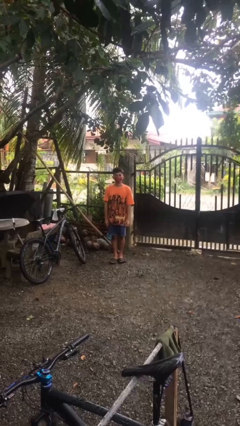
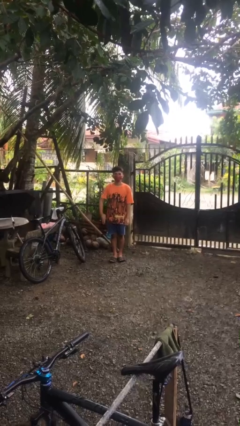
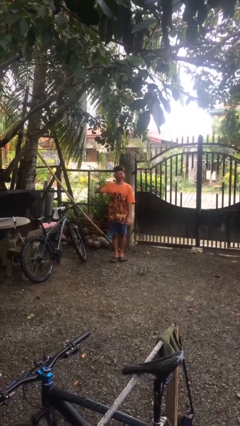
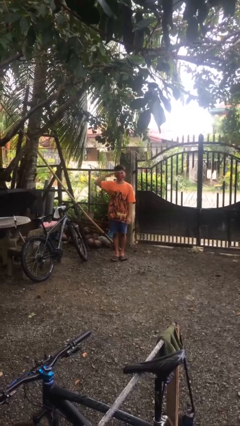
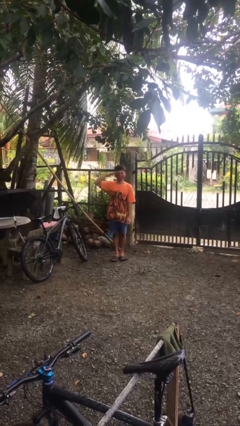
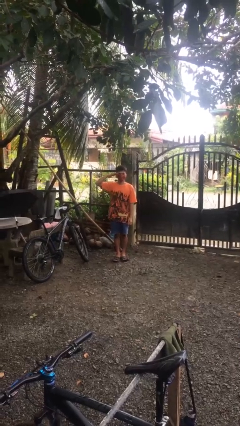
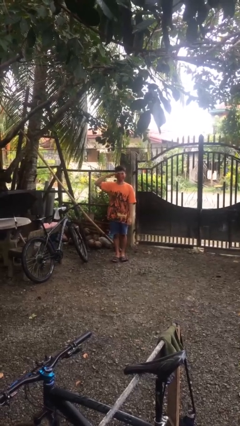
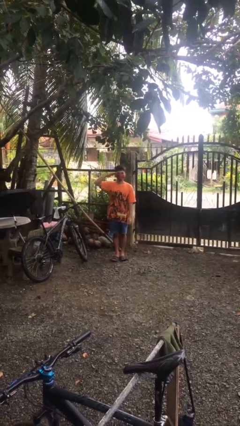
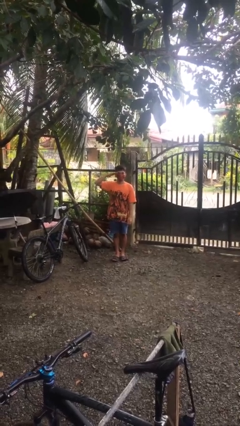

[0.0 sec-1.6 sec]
person salutes

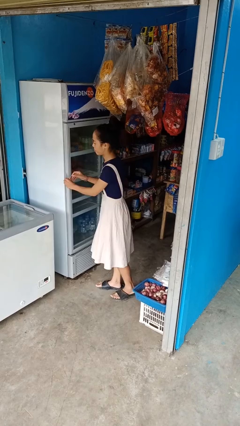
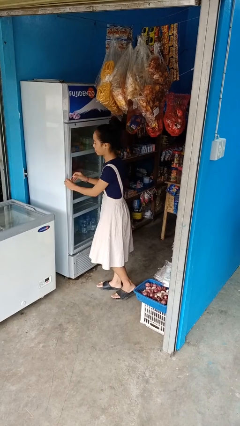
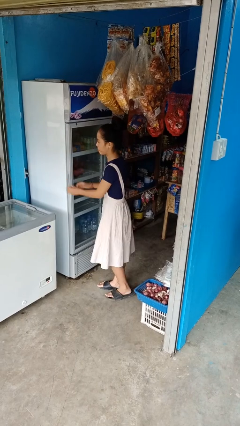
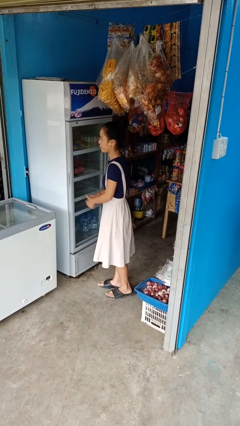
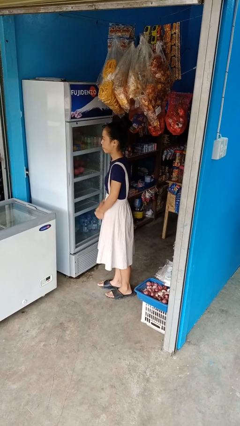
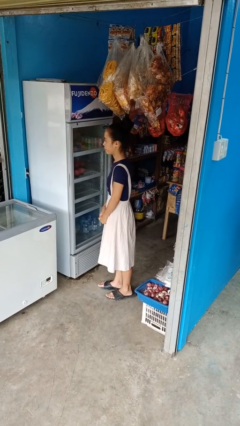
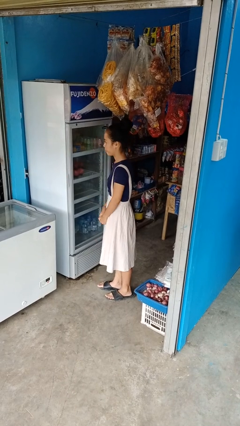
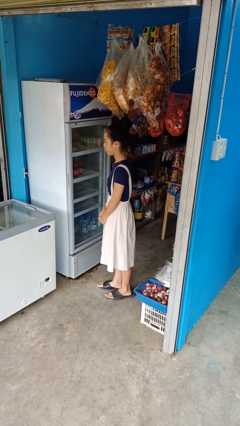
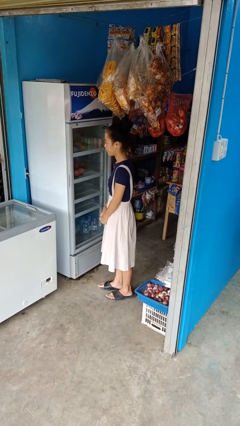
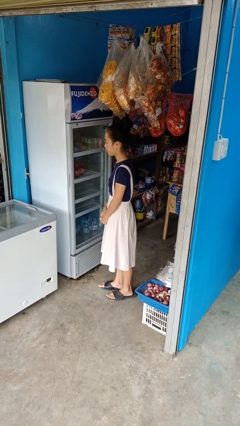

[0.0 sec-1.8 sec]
person closes refrigerator

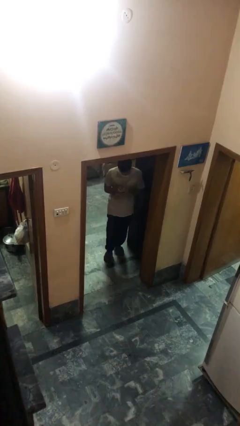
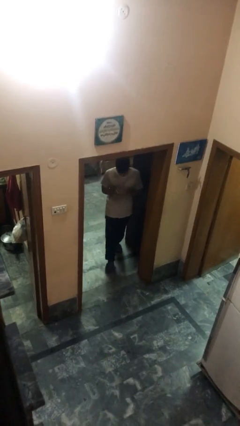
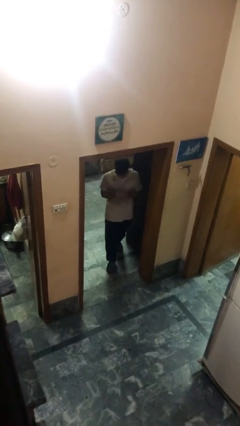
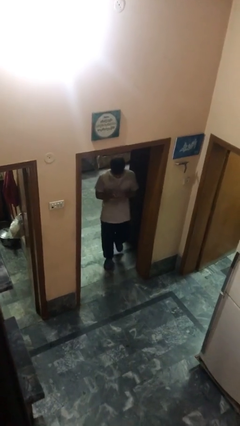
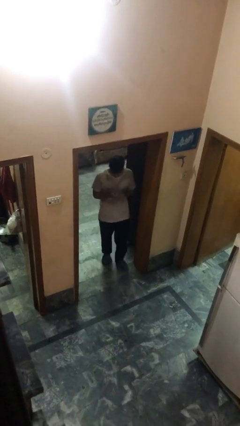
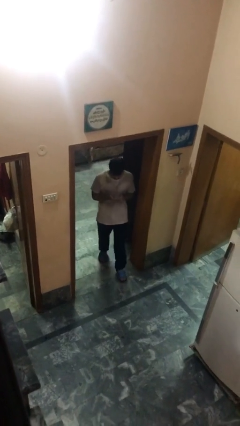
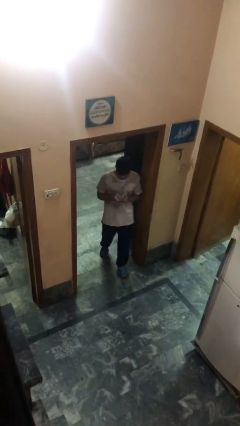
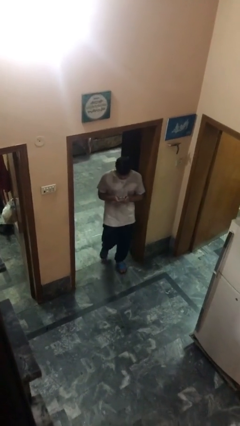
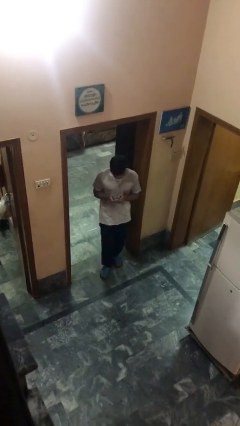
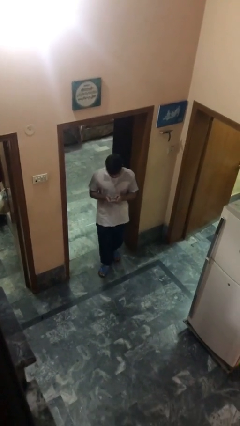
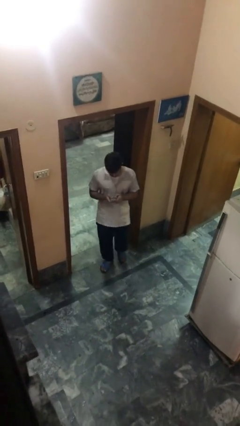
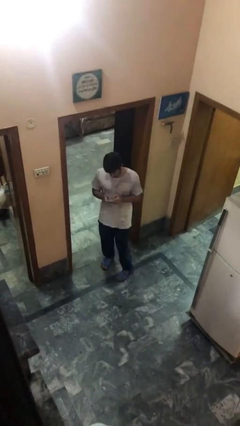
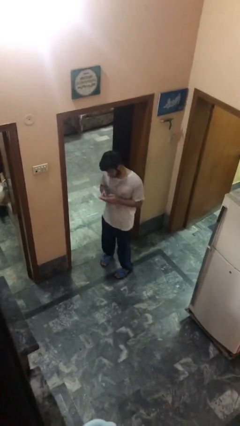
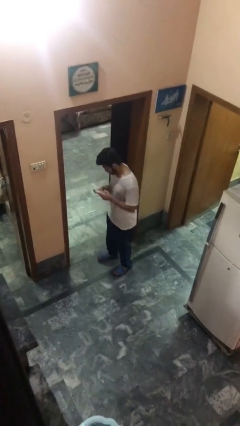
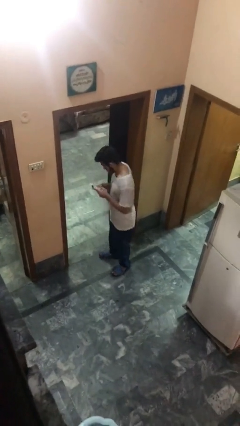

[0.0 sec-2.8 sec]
person enters scene through structure

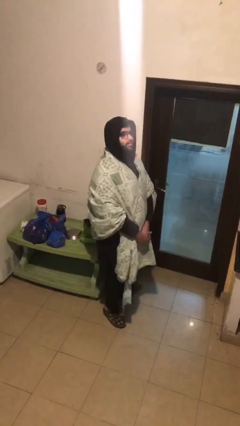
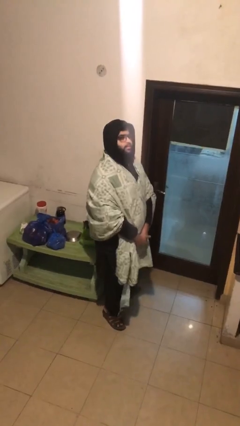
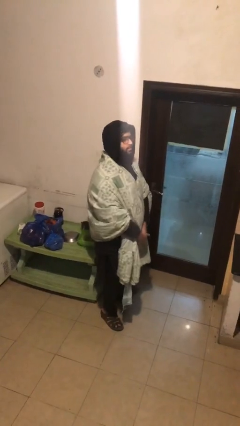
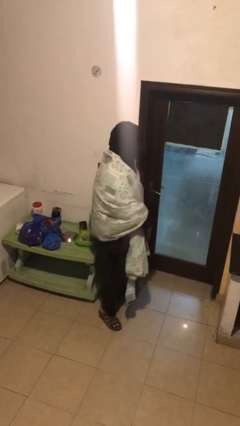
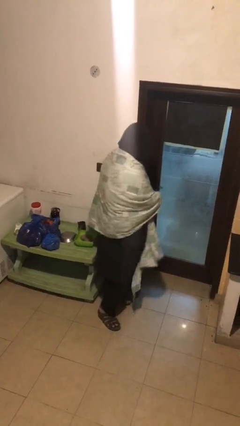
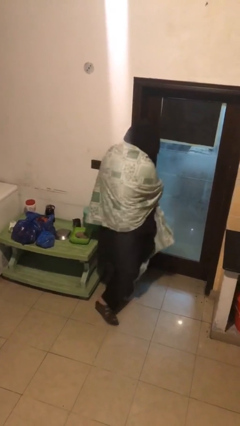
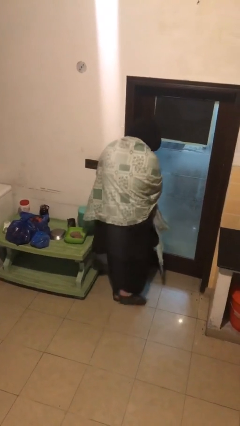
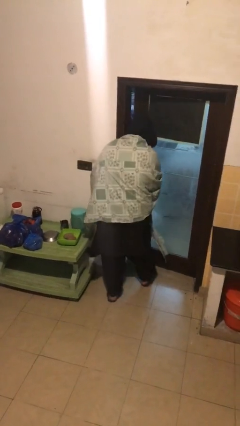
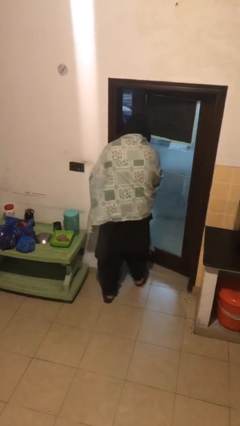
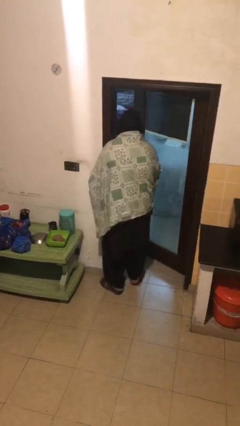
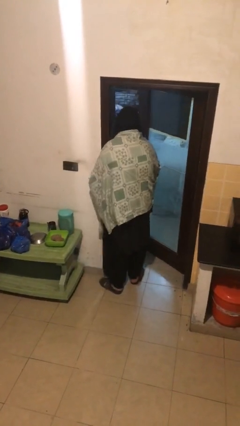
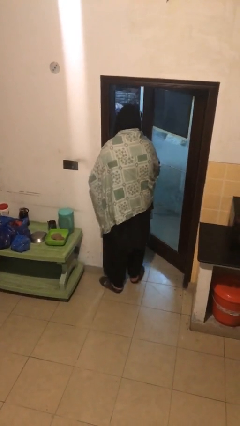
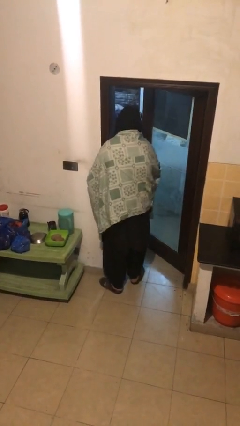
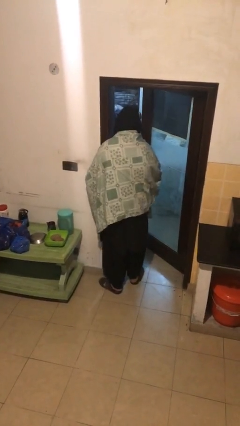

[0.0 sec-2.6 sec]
person opens facility door

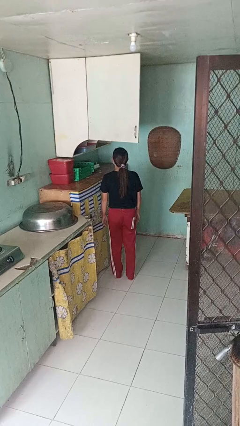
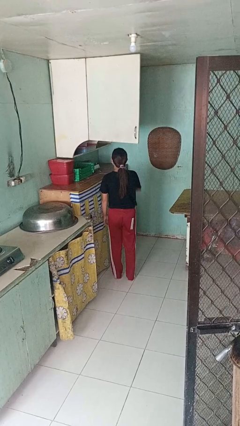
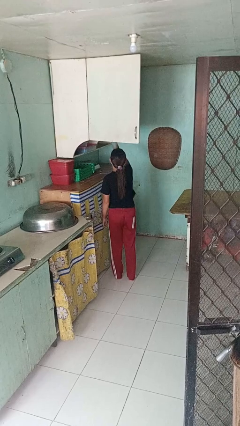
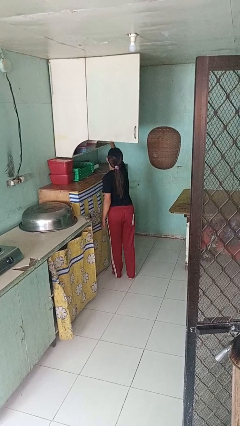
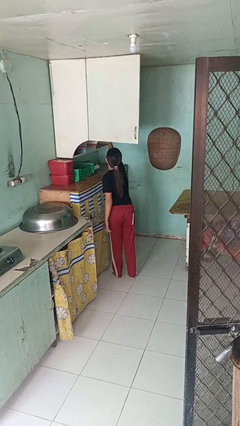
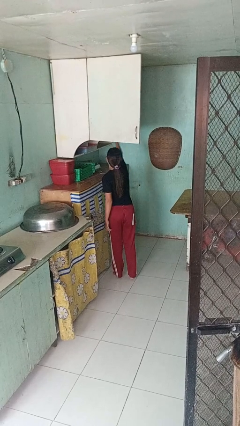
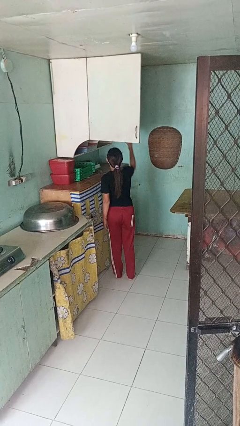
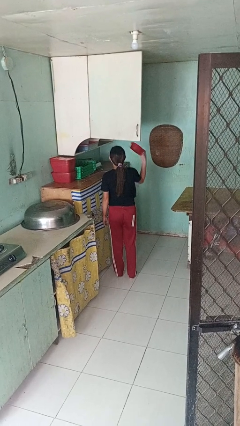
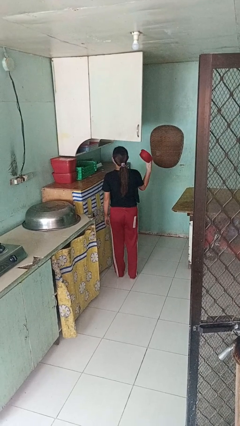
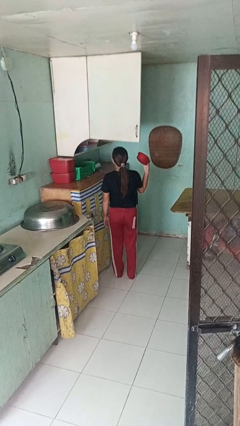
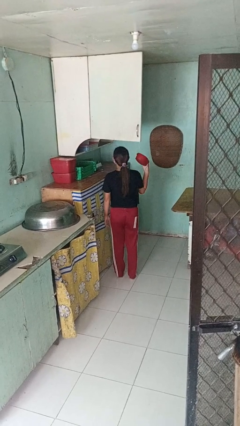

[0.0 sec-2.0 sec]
person takes object from cabinet

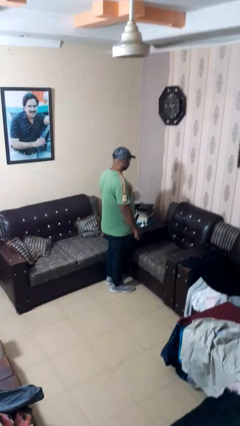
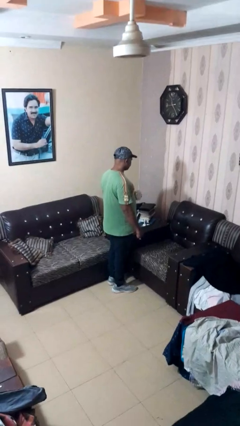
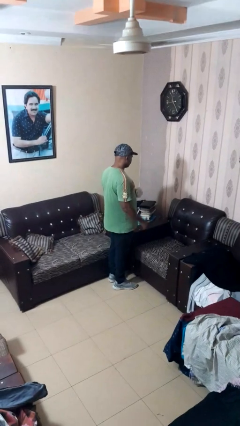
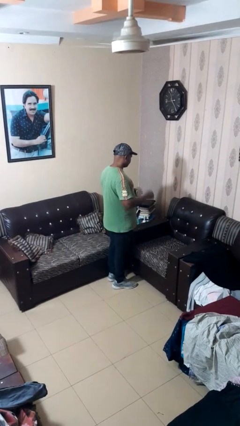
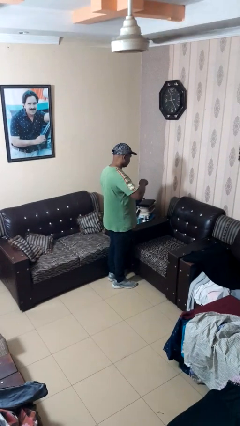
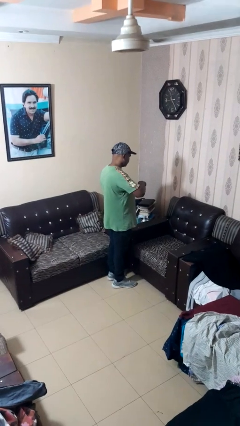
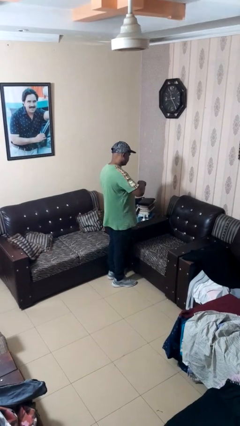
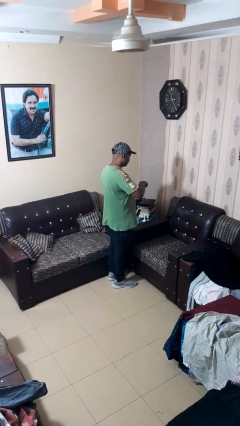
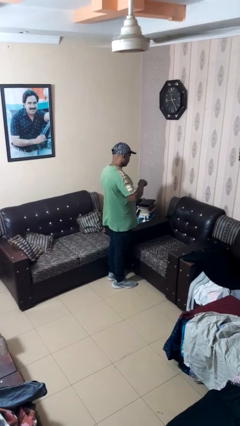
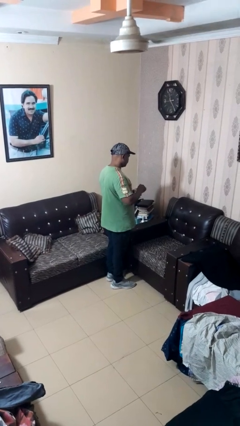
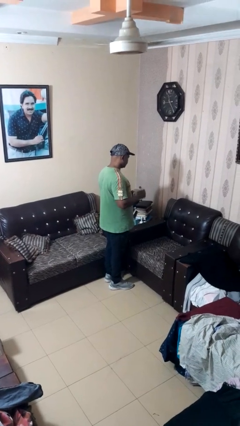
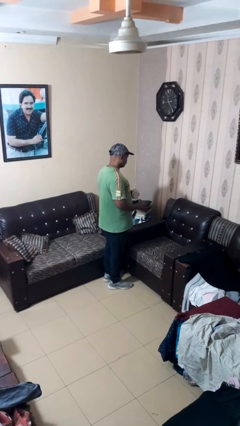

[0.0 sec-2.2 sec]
person stirs mug

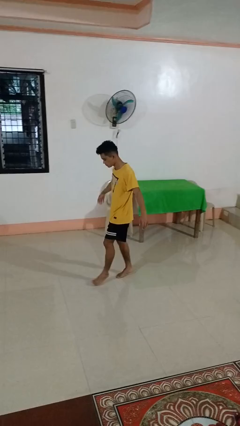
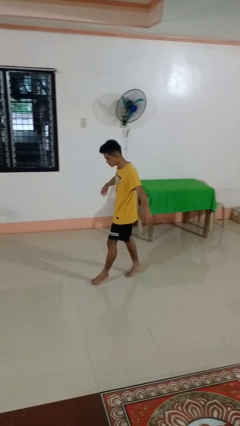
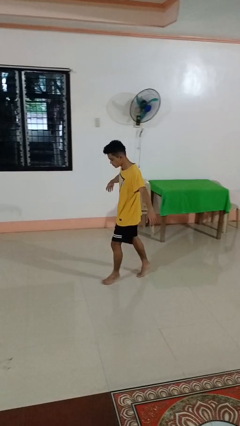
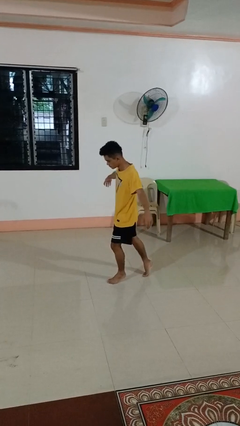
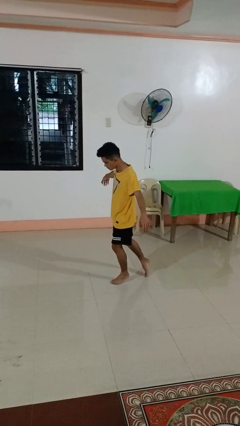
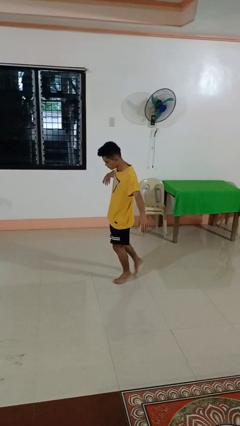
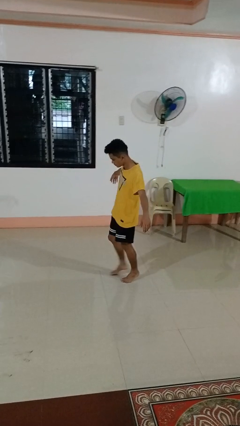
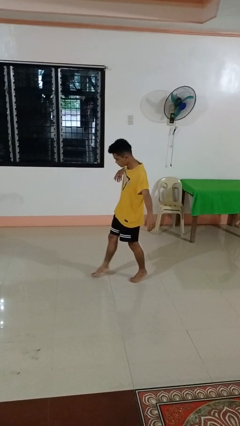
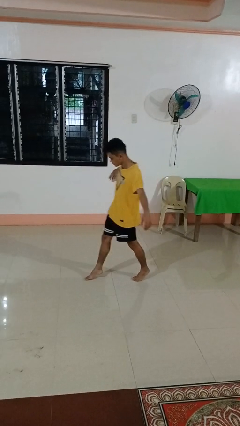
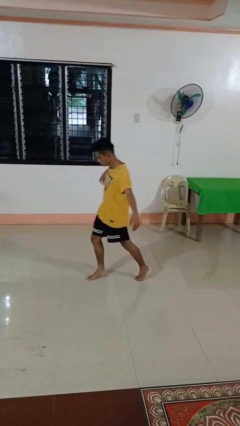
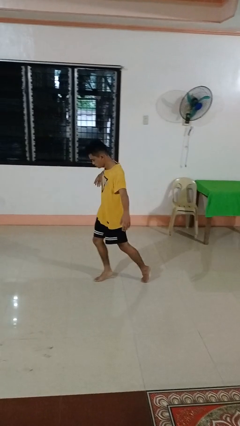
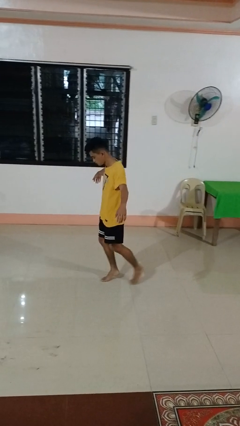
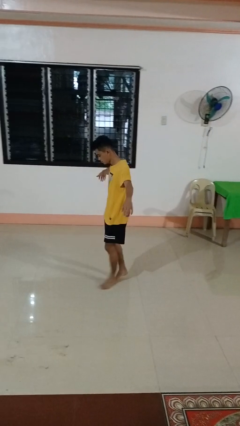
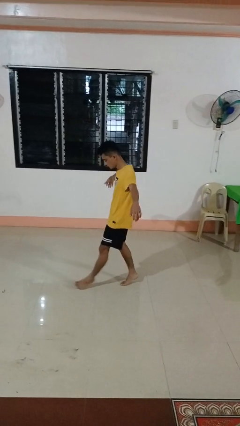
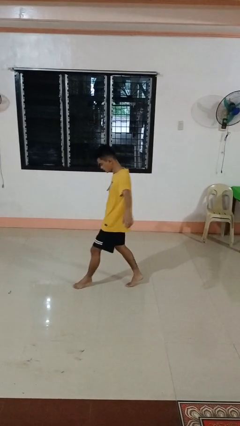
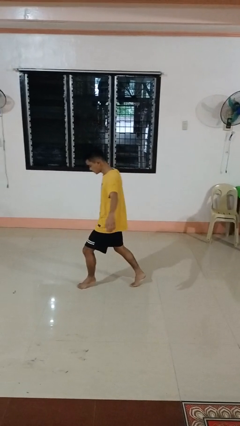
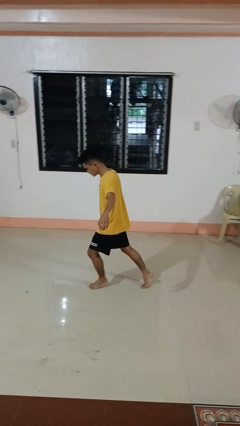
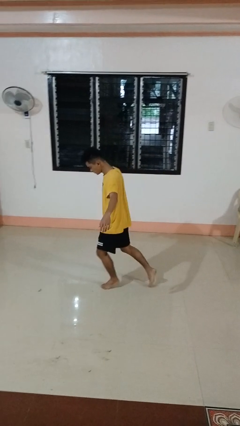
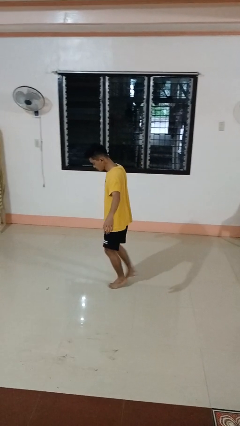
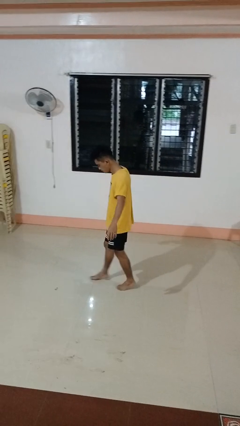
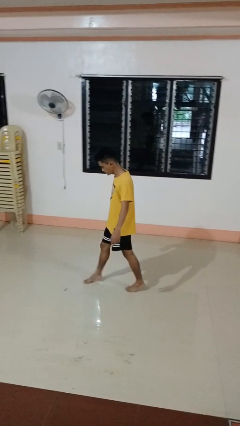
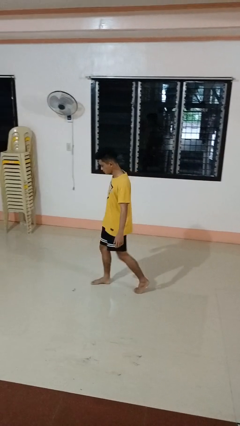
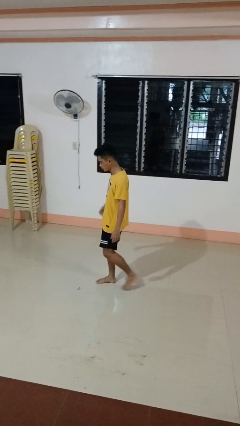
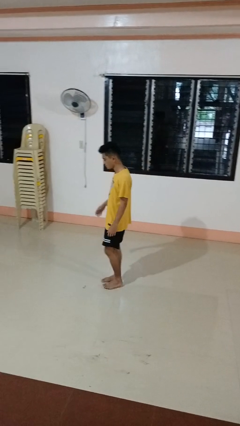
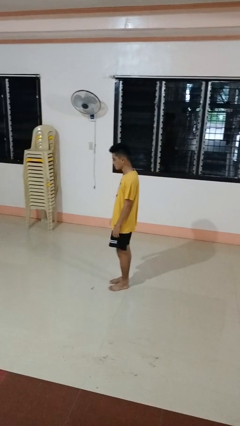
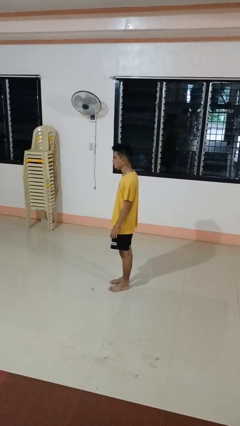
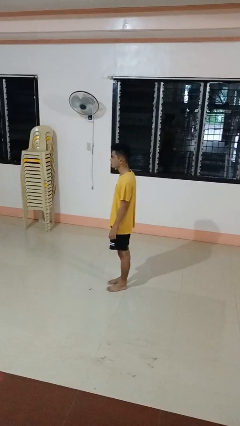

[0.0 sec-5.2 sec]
person walks tiptoe
